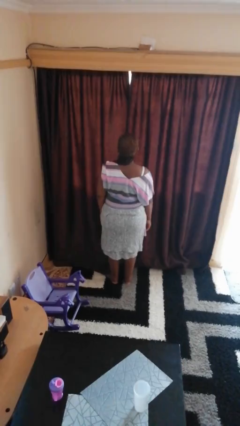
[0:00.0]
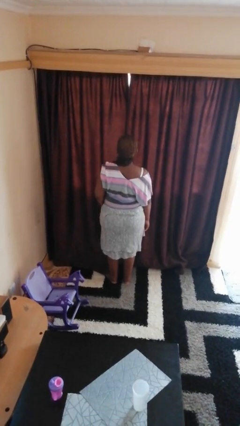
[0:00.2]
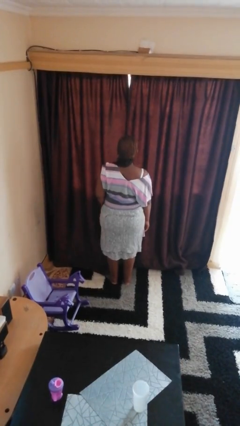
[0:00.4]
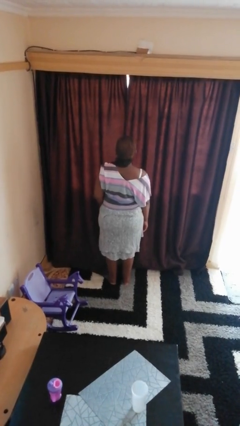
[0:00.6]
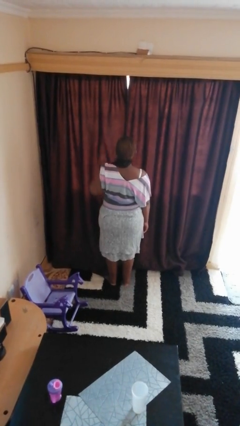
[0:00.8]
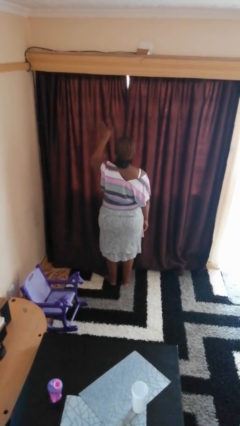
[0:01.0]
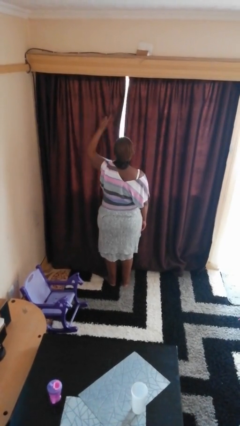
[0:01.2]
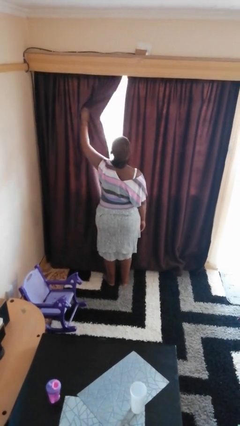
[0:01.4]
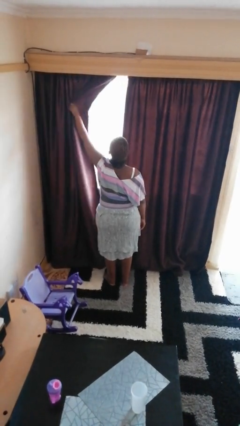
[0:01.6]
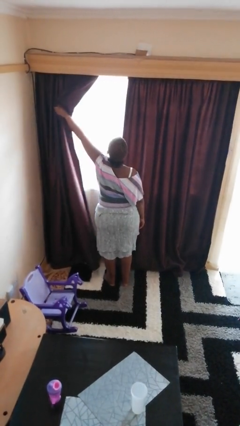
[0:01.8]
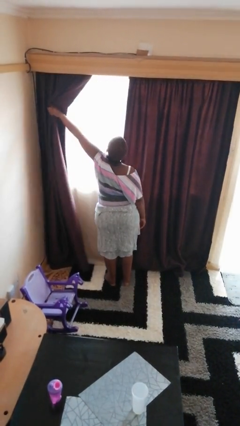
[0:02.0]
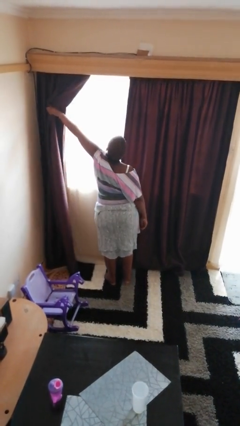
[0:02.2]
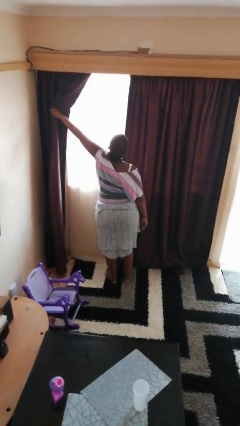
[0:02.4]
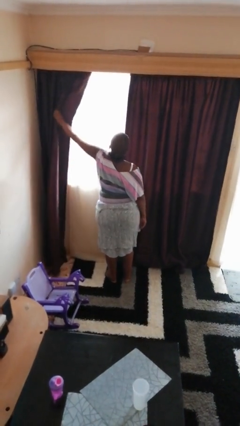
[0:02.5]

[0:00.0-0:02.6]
person opens curtains

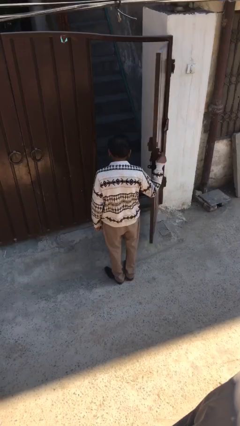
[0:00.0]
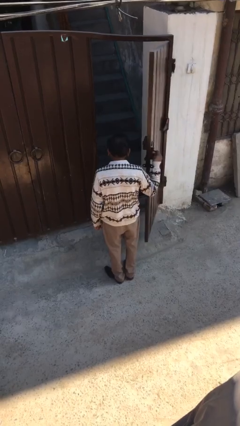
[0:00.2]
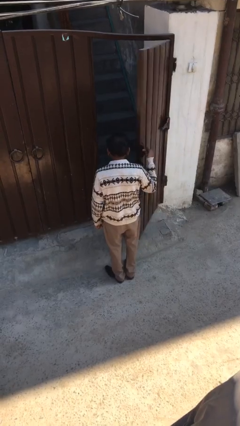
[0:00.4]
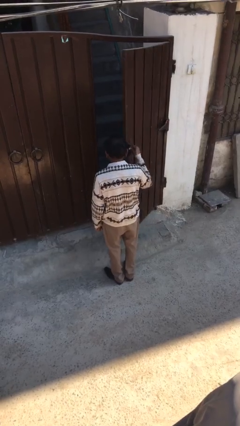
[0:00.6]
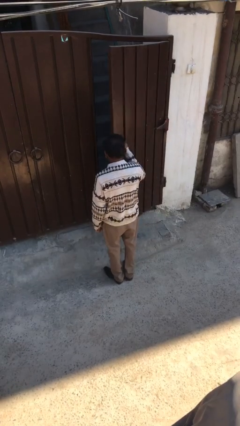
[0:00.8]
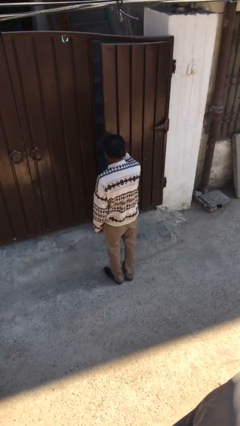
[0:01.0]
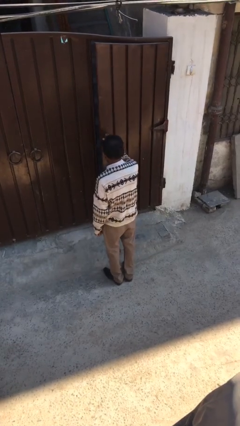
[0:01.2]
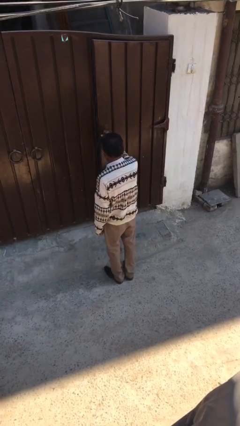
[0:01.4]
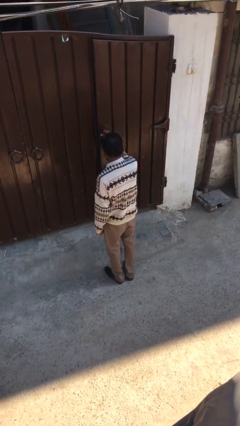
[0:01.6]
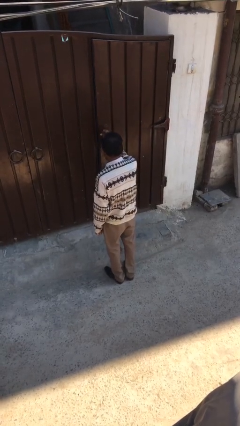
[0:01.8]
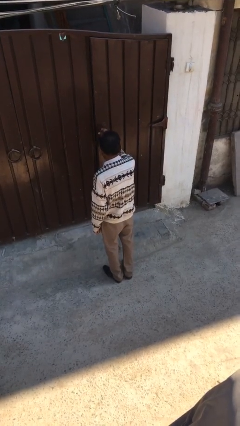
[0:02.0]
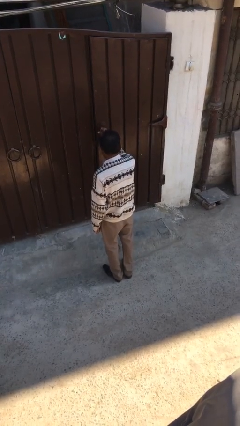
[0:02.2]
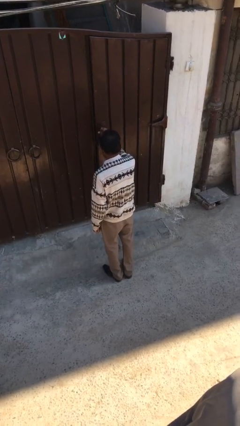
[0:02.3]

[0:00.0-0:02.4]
person closes facility door

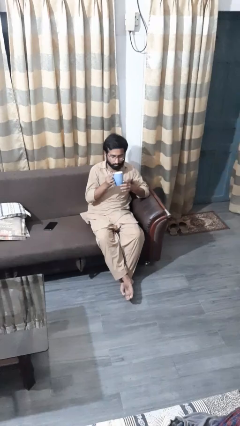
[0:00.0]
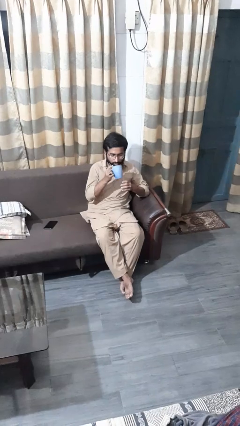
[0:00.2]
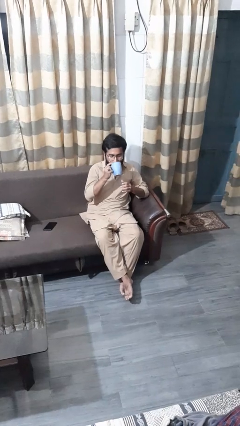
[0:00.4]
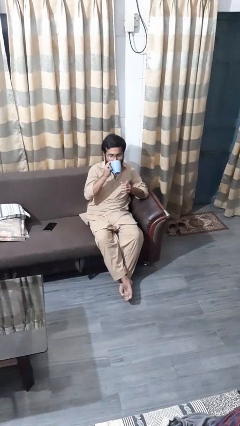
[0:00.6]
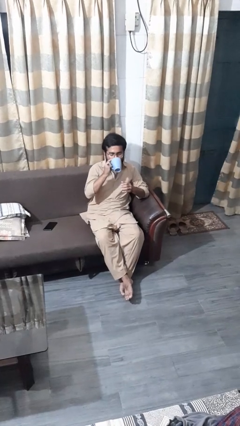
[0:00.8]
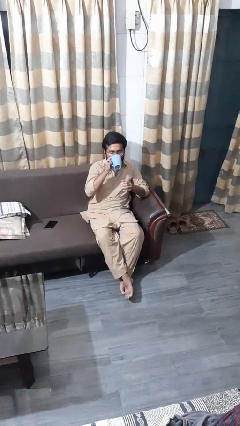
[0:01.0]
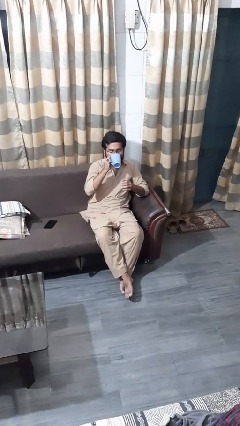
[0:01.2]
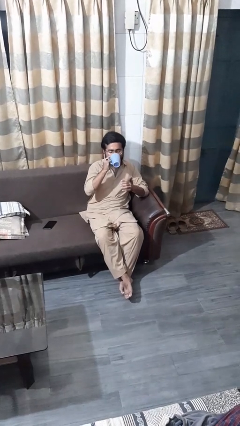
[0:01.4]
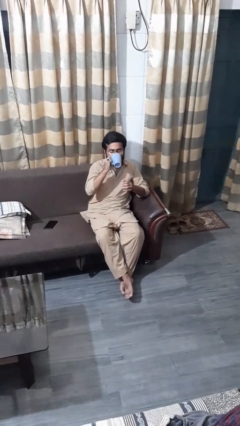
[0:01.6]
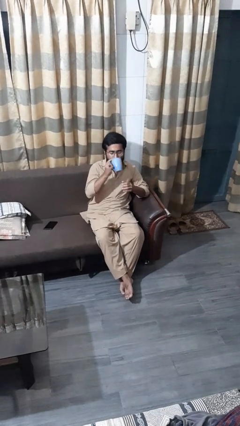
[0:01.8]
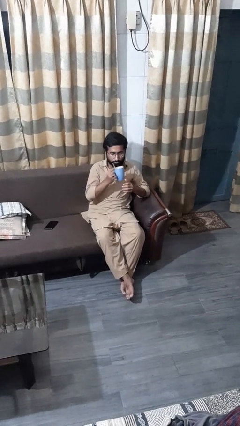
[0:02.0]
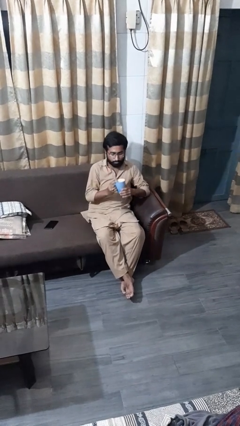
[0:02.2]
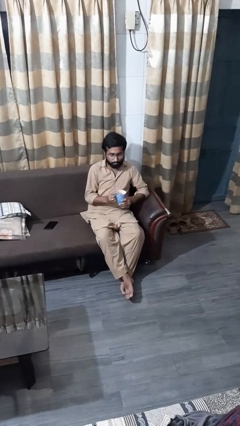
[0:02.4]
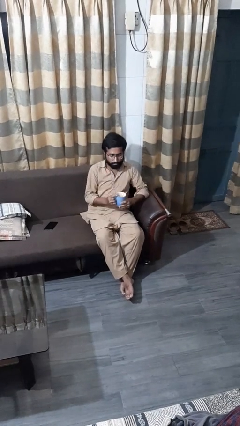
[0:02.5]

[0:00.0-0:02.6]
person drinks from mug

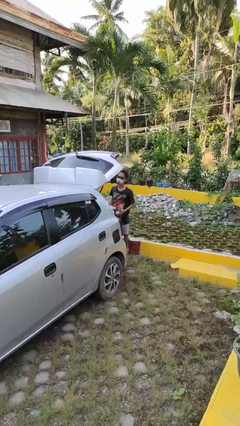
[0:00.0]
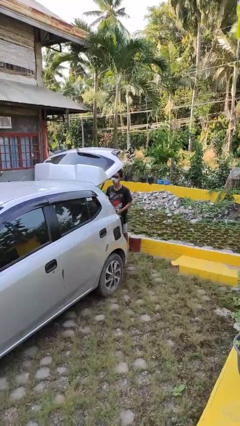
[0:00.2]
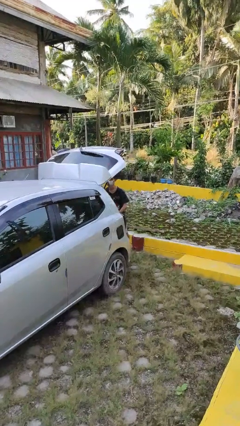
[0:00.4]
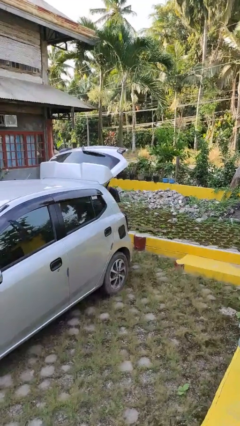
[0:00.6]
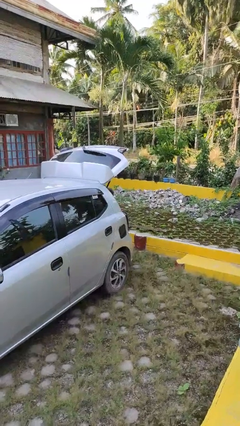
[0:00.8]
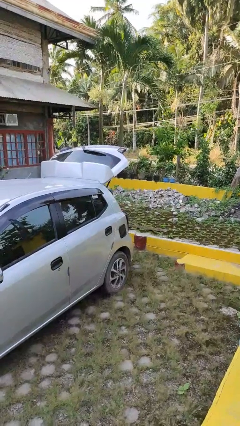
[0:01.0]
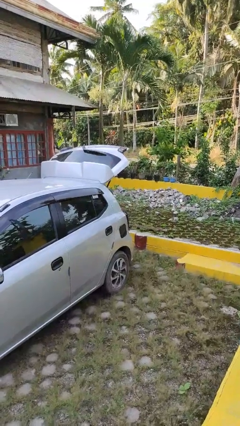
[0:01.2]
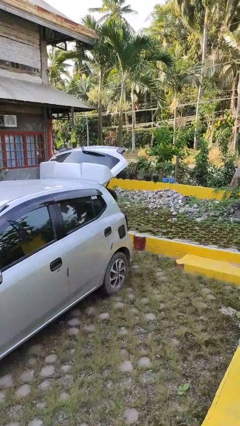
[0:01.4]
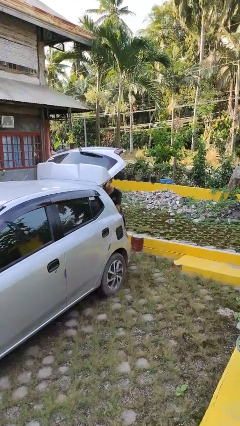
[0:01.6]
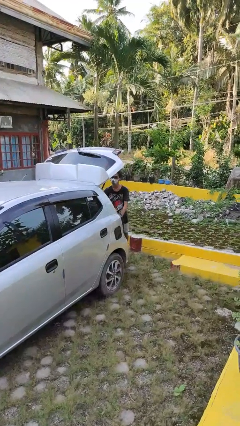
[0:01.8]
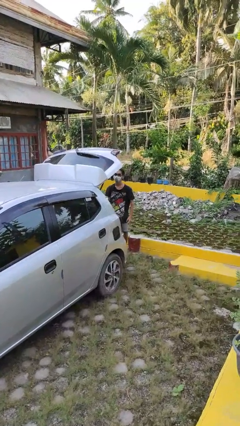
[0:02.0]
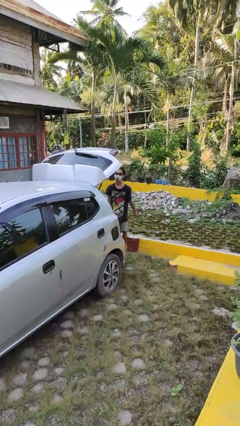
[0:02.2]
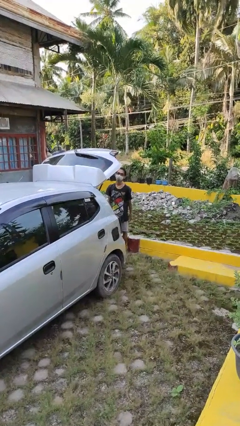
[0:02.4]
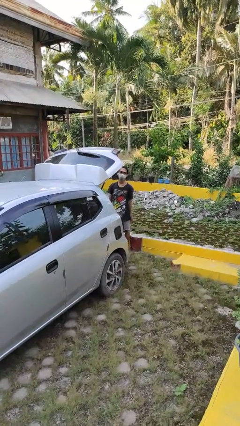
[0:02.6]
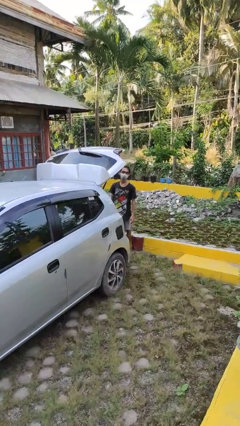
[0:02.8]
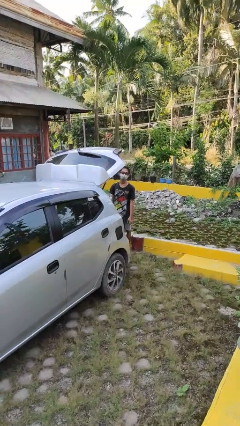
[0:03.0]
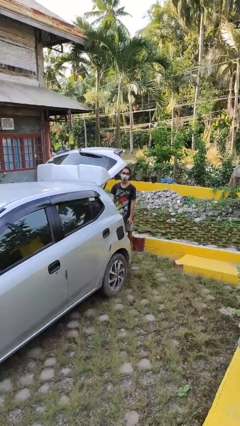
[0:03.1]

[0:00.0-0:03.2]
person loads car

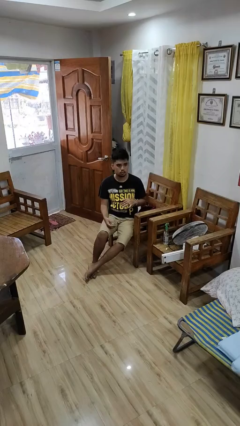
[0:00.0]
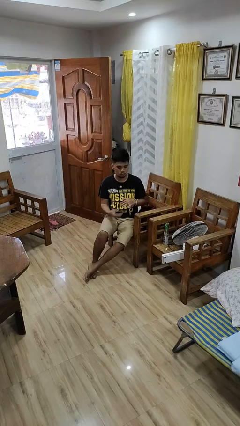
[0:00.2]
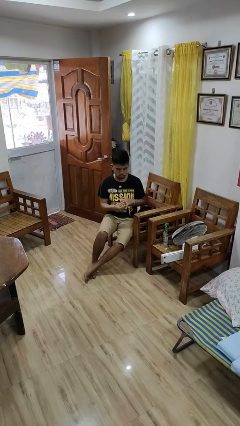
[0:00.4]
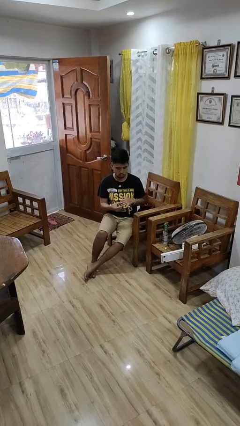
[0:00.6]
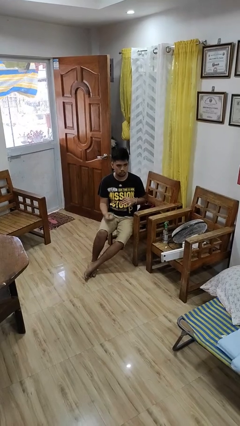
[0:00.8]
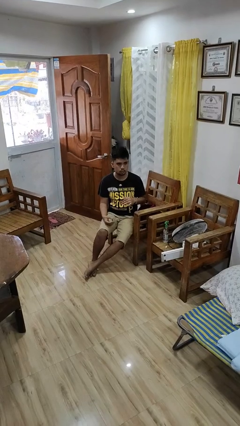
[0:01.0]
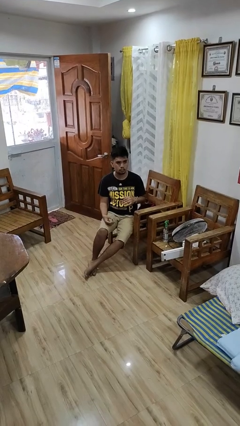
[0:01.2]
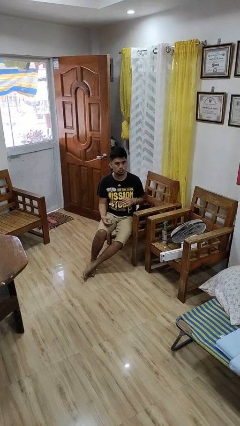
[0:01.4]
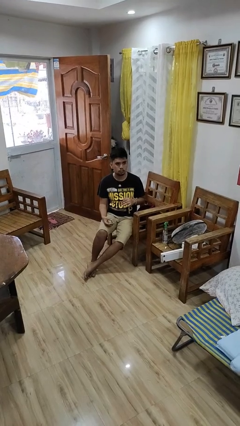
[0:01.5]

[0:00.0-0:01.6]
person takes off ring

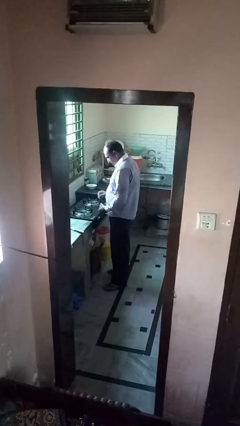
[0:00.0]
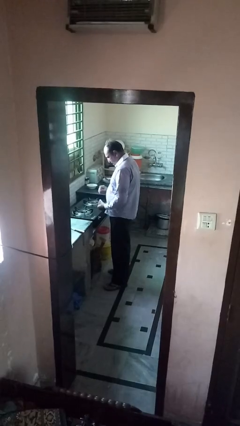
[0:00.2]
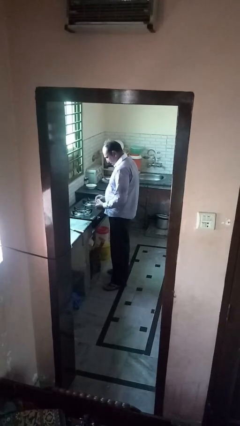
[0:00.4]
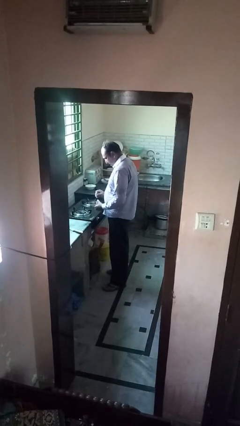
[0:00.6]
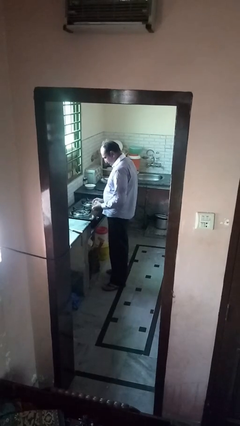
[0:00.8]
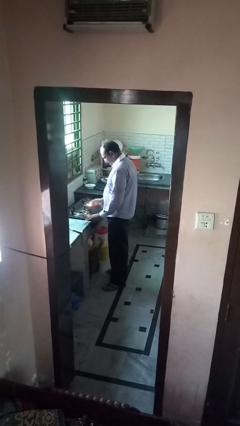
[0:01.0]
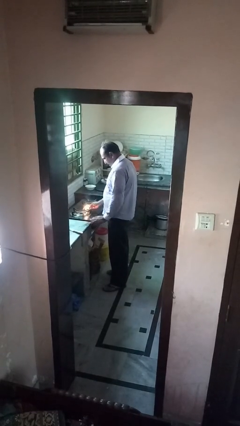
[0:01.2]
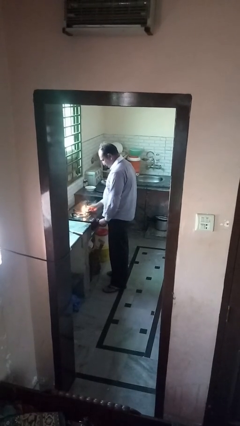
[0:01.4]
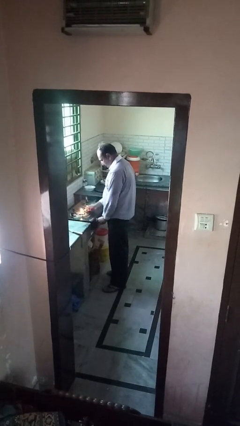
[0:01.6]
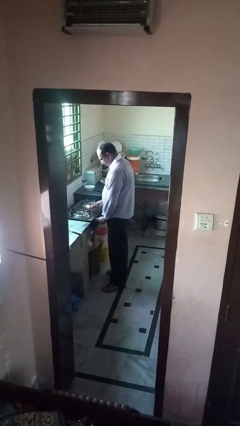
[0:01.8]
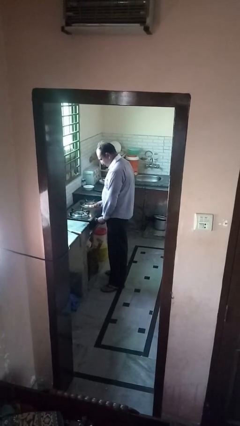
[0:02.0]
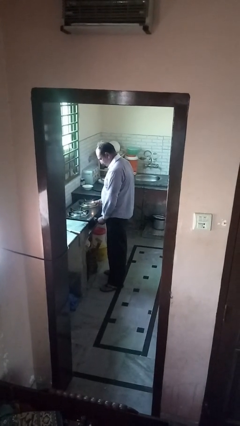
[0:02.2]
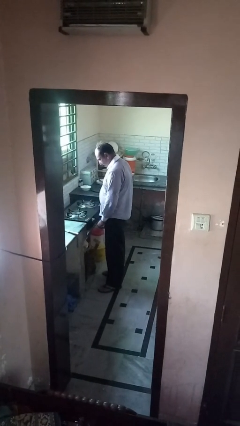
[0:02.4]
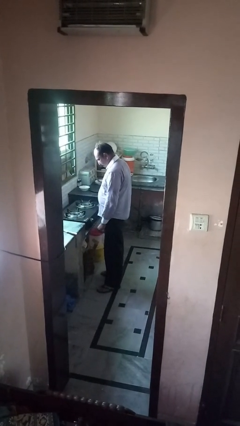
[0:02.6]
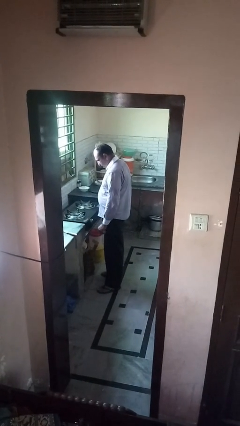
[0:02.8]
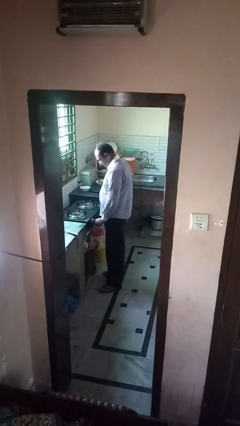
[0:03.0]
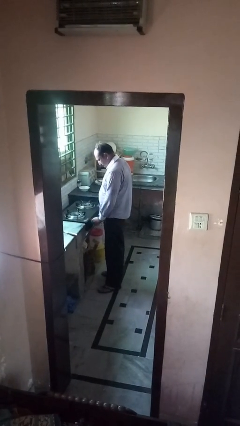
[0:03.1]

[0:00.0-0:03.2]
person turns on stovetop

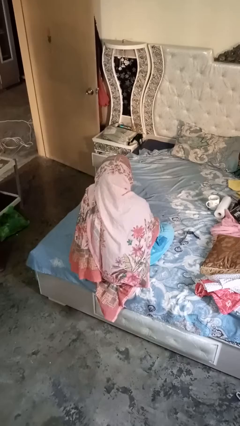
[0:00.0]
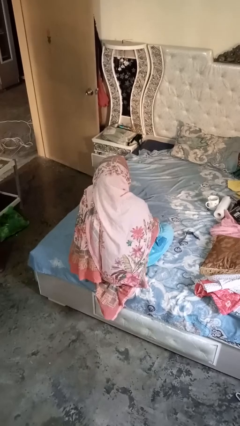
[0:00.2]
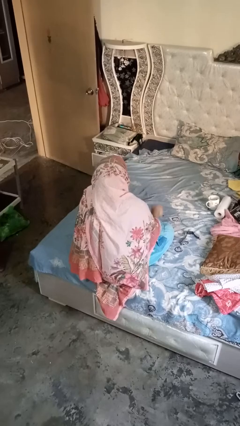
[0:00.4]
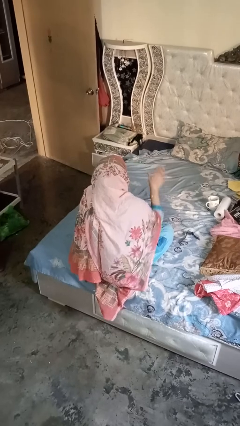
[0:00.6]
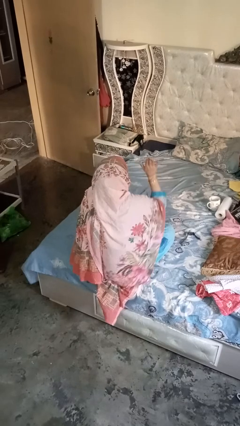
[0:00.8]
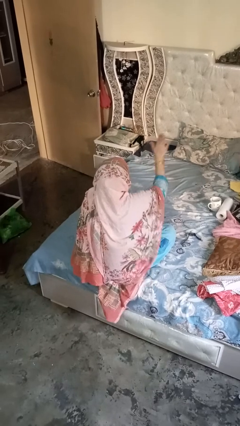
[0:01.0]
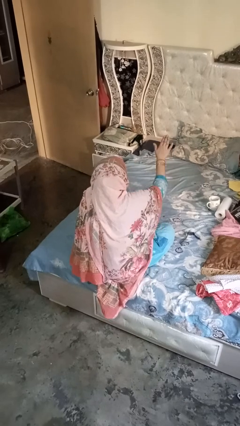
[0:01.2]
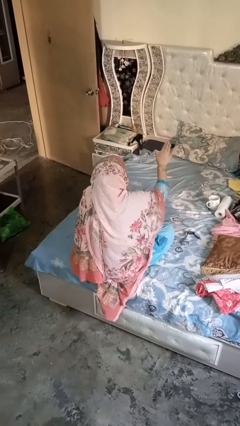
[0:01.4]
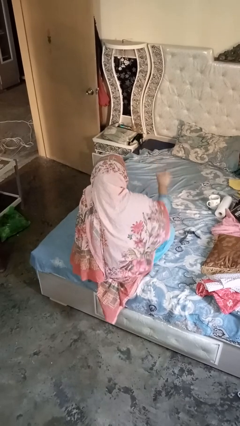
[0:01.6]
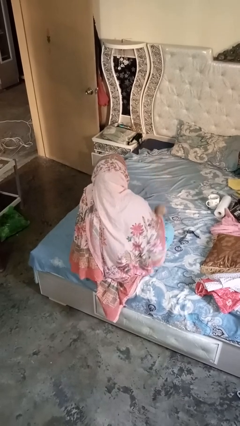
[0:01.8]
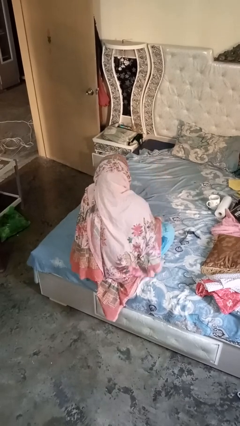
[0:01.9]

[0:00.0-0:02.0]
person gestures stop
